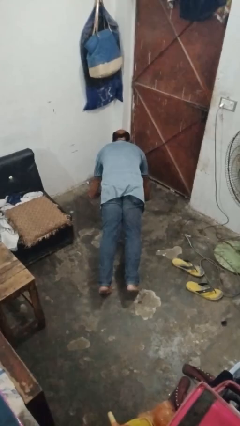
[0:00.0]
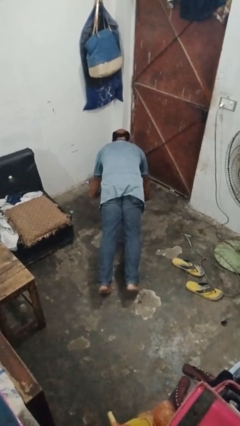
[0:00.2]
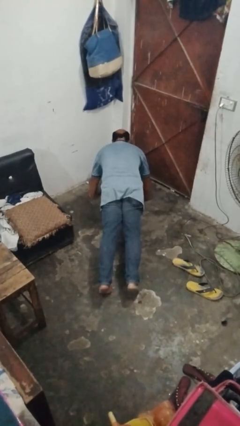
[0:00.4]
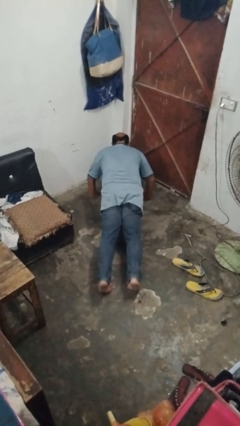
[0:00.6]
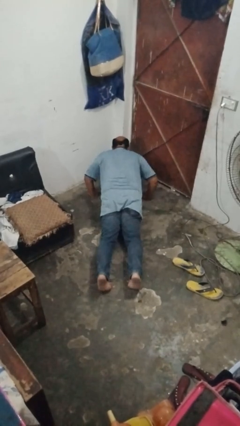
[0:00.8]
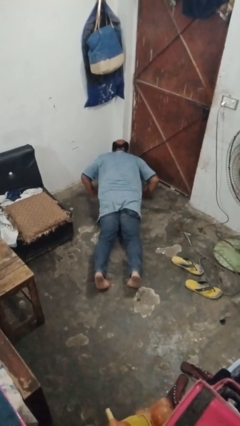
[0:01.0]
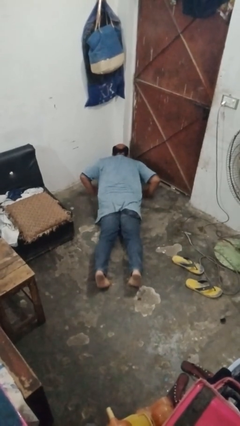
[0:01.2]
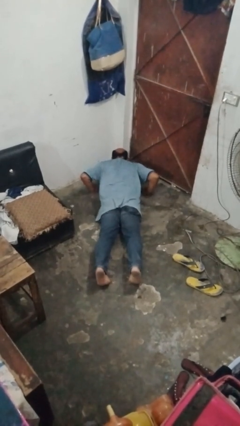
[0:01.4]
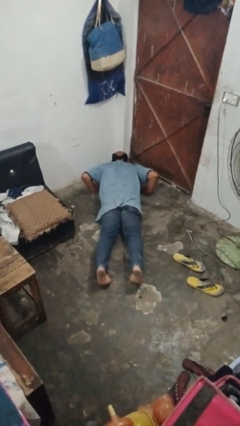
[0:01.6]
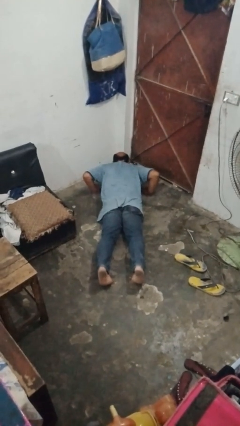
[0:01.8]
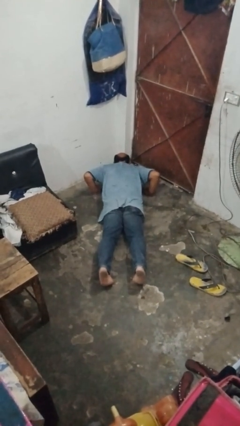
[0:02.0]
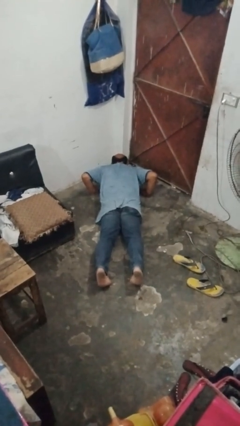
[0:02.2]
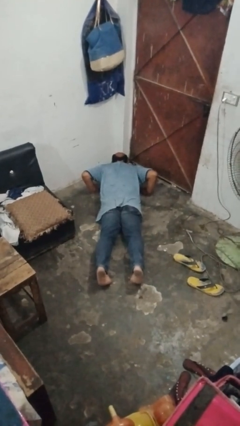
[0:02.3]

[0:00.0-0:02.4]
person exercises with pushup

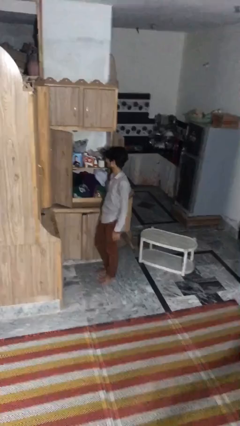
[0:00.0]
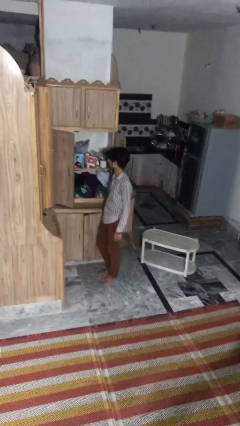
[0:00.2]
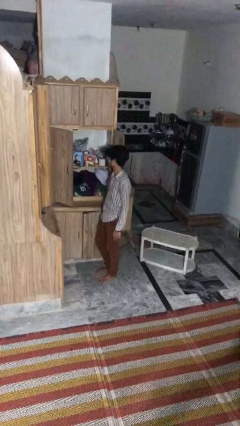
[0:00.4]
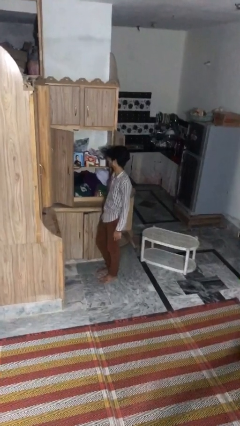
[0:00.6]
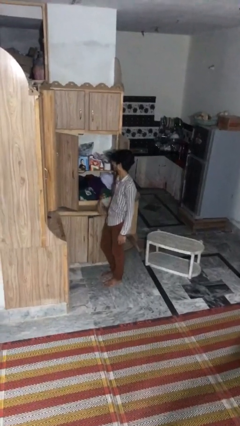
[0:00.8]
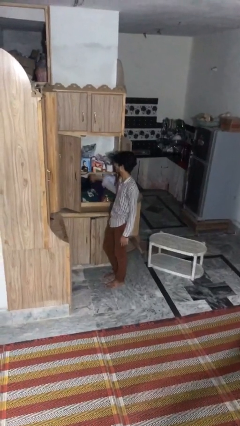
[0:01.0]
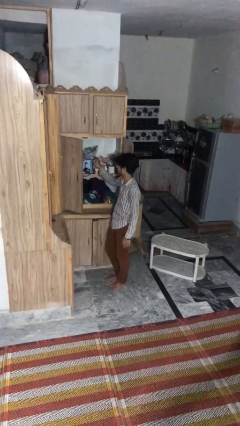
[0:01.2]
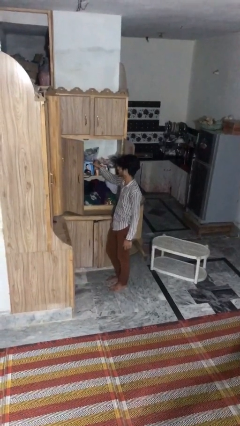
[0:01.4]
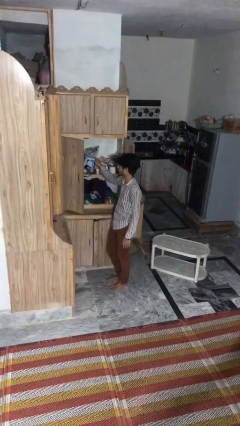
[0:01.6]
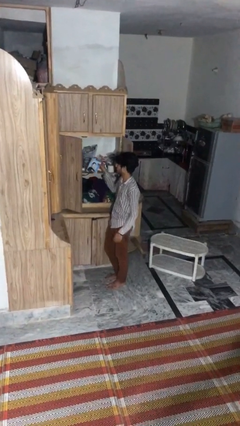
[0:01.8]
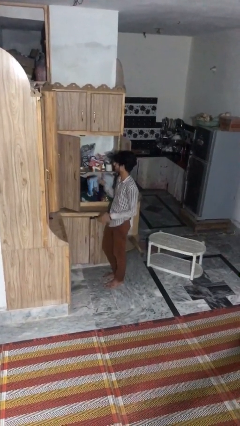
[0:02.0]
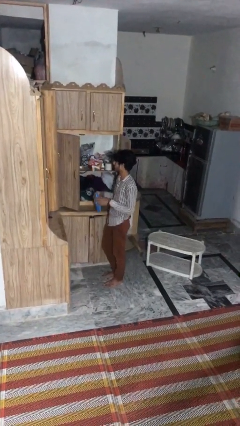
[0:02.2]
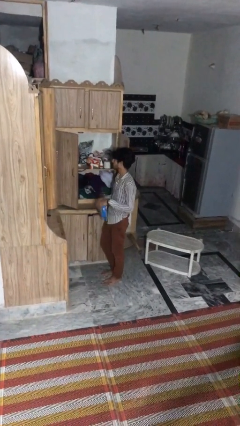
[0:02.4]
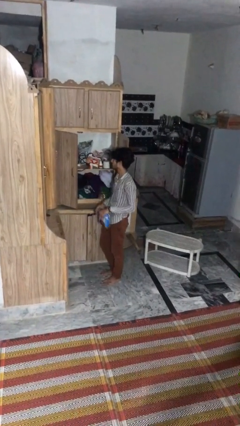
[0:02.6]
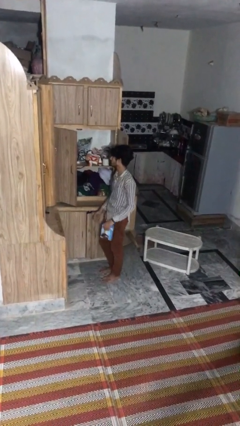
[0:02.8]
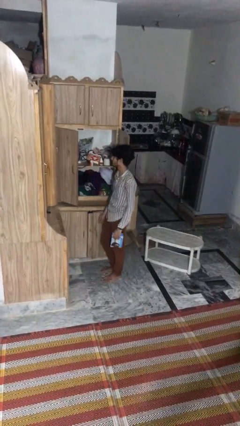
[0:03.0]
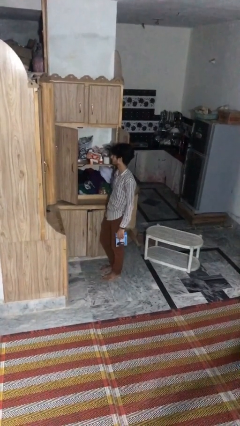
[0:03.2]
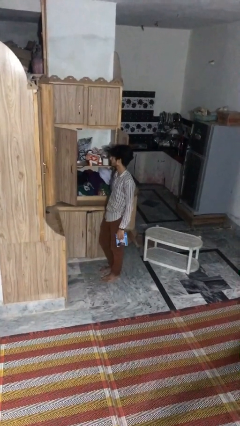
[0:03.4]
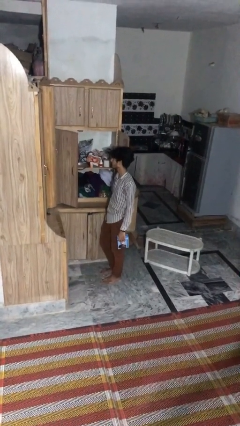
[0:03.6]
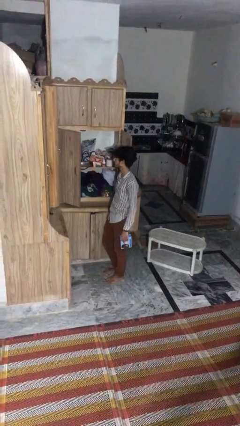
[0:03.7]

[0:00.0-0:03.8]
person picks up object from cabinet

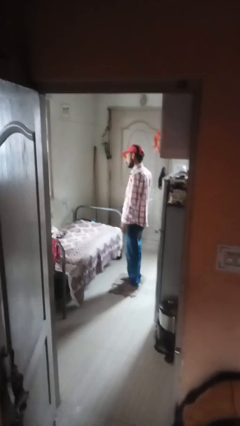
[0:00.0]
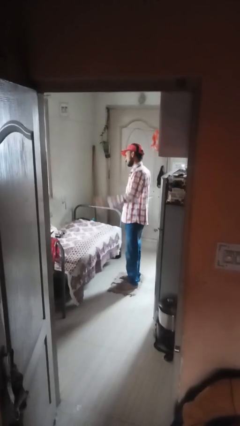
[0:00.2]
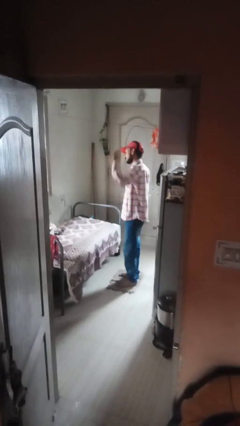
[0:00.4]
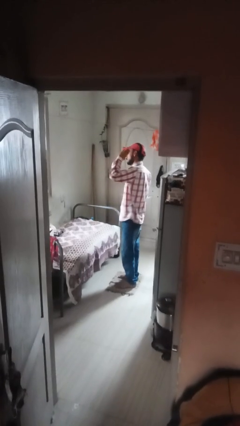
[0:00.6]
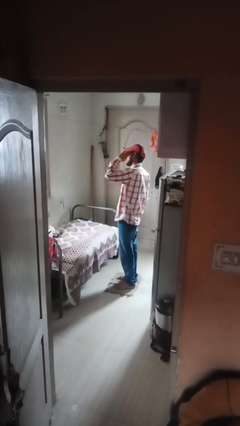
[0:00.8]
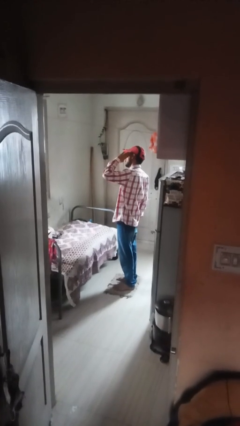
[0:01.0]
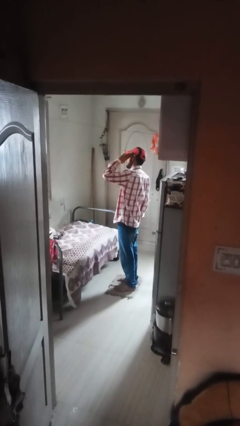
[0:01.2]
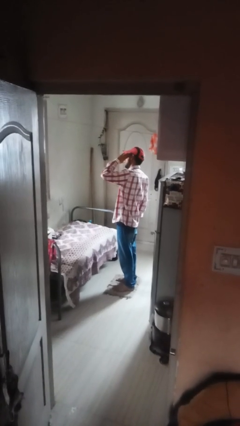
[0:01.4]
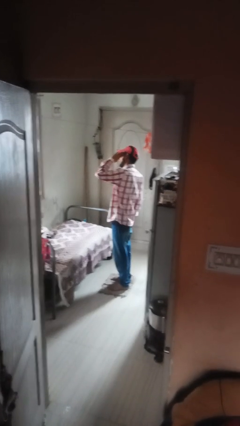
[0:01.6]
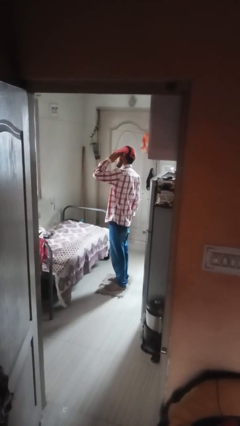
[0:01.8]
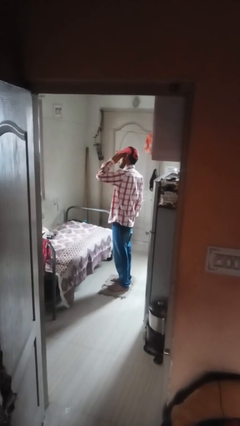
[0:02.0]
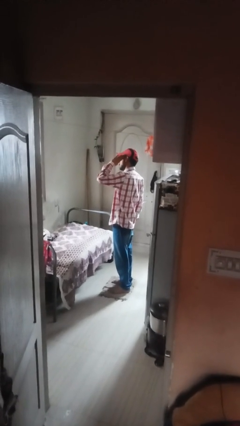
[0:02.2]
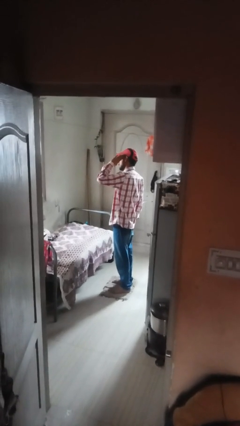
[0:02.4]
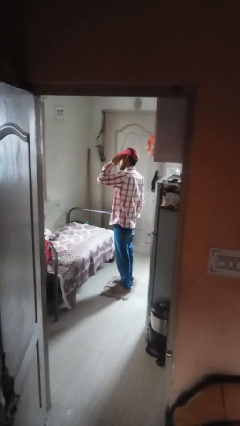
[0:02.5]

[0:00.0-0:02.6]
person salutes

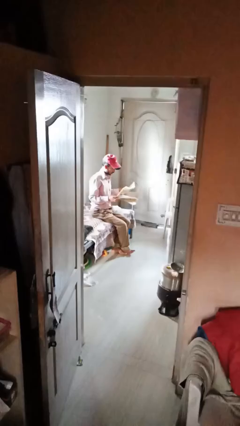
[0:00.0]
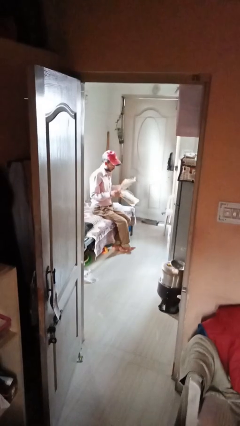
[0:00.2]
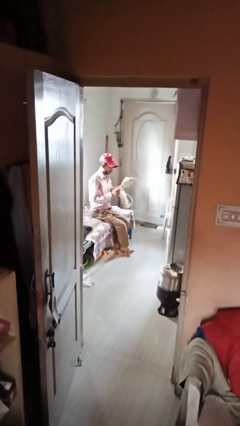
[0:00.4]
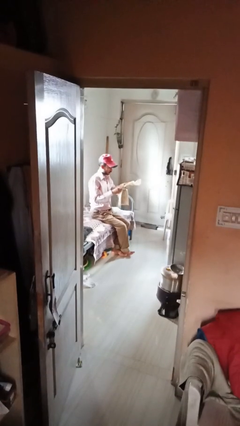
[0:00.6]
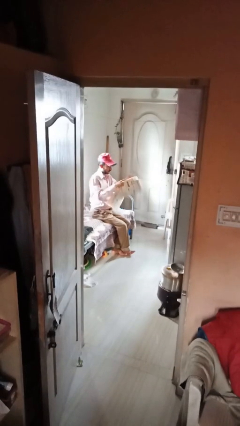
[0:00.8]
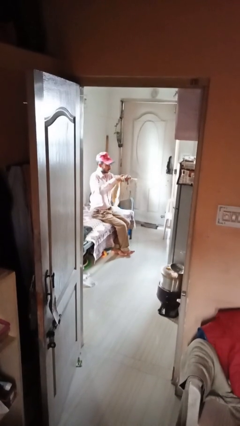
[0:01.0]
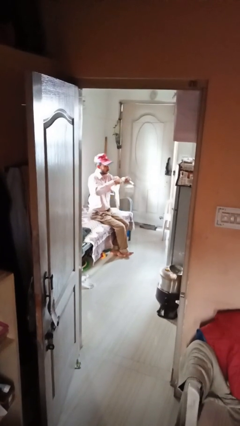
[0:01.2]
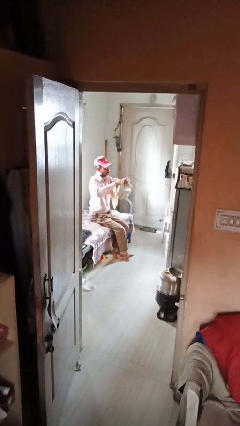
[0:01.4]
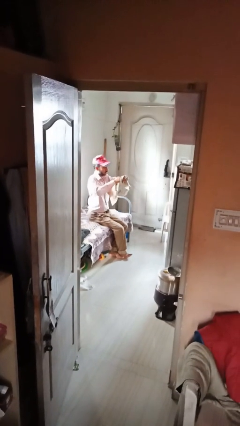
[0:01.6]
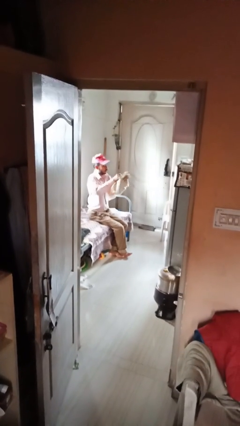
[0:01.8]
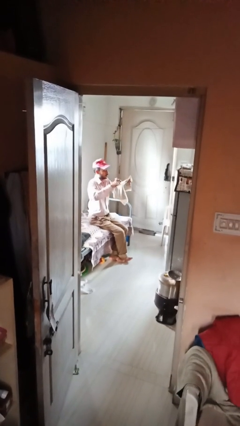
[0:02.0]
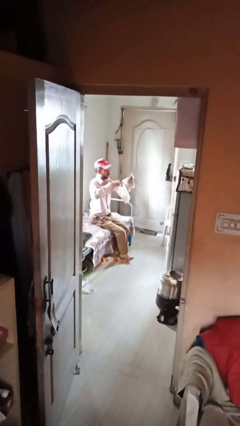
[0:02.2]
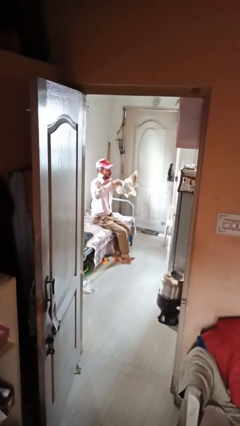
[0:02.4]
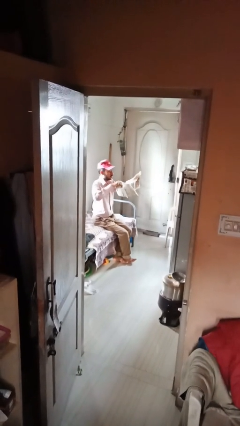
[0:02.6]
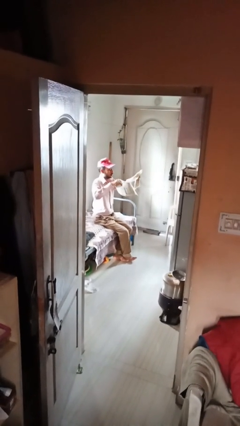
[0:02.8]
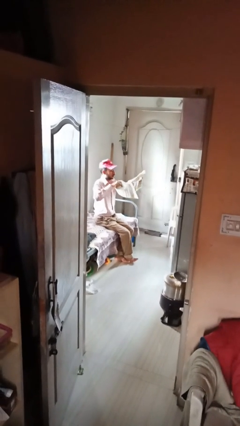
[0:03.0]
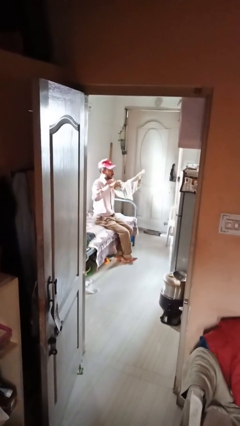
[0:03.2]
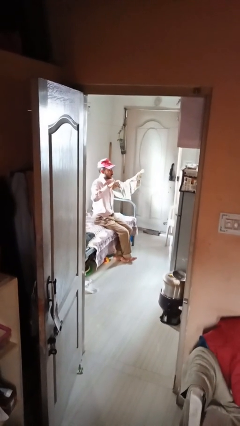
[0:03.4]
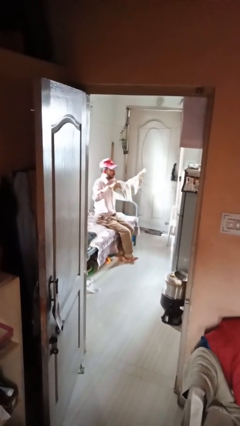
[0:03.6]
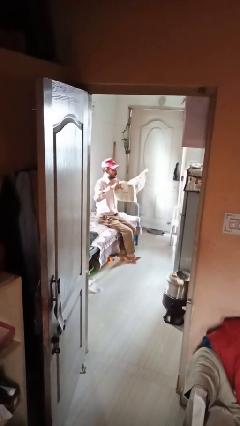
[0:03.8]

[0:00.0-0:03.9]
person tears paper

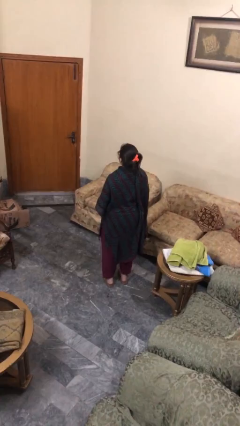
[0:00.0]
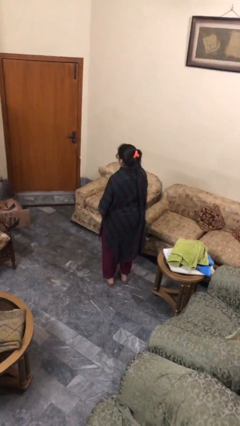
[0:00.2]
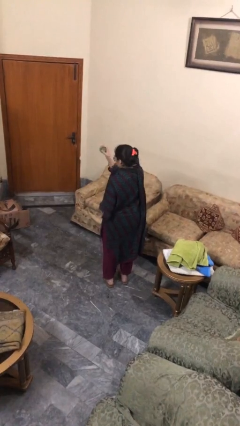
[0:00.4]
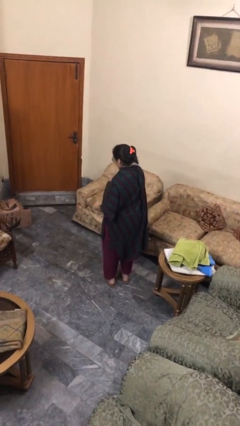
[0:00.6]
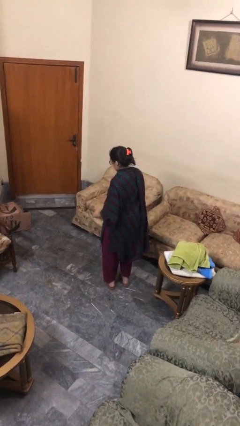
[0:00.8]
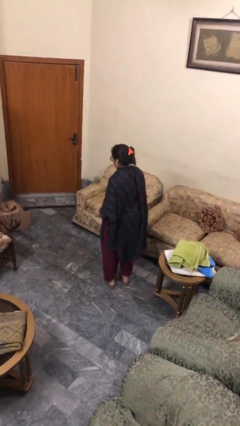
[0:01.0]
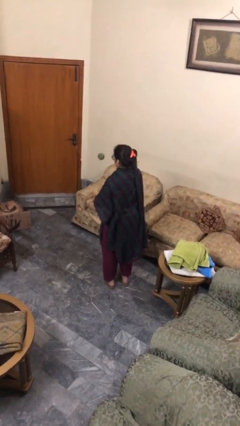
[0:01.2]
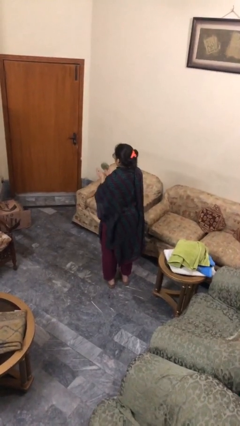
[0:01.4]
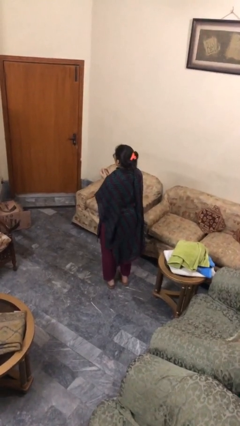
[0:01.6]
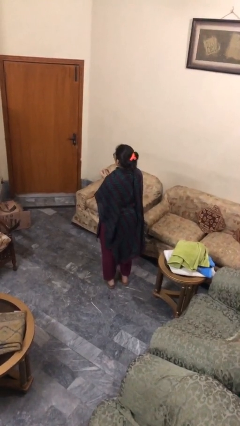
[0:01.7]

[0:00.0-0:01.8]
person bounces ball on floor

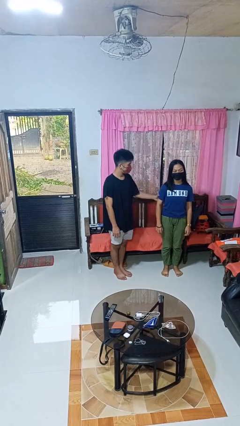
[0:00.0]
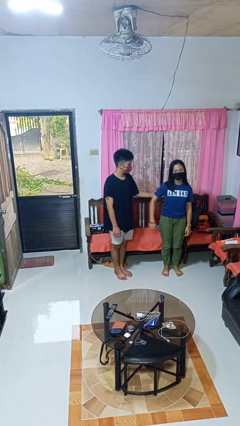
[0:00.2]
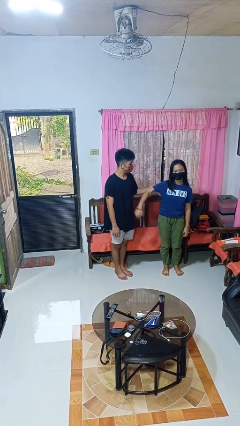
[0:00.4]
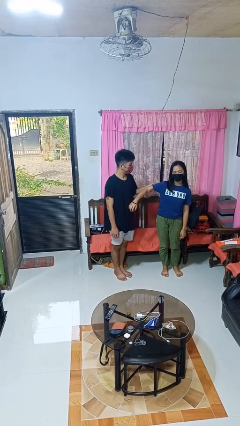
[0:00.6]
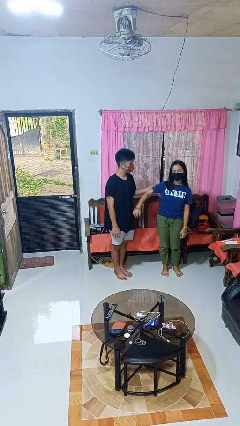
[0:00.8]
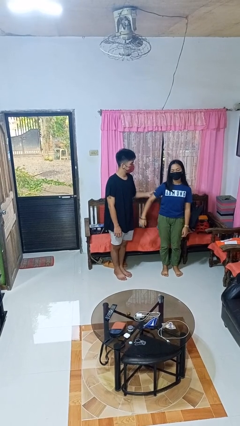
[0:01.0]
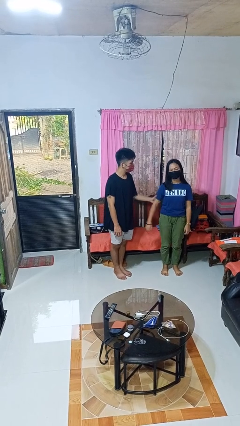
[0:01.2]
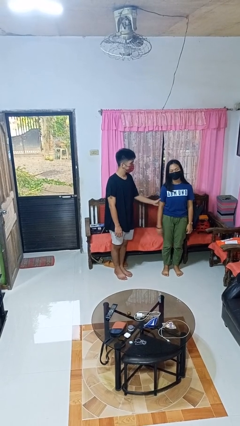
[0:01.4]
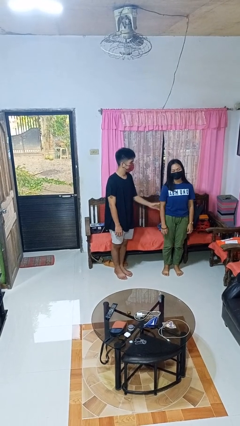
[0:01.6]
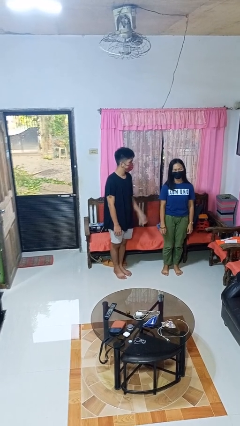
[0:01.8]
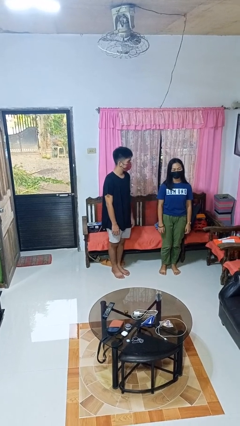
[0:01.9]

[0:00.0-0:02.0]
person grabs person by bicep

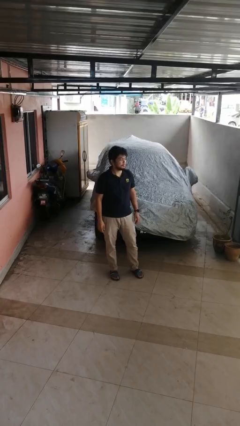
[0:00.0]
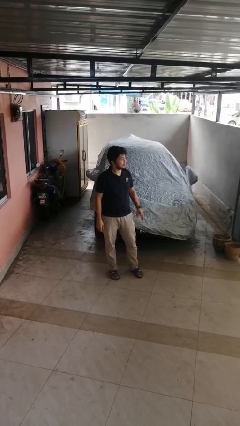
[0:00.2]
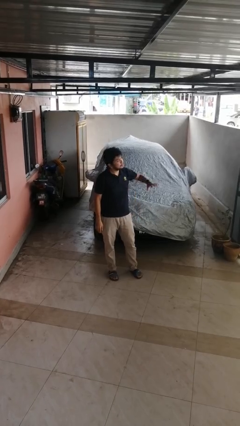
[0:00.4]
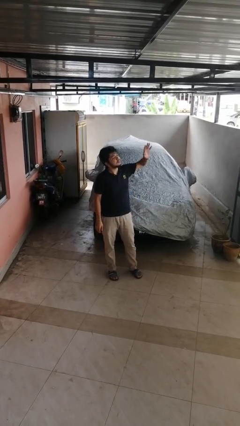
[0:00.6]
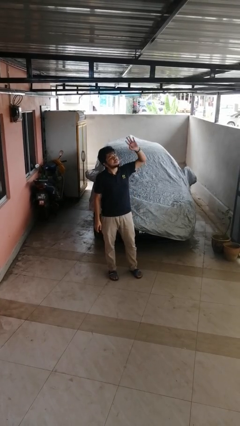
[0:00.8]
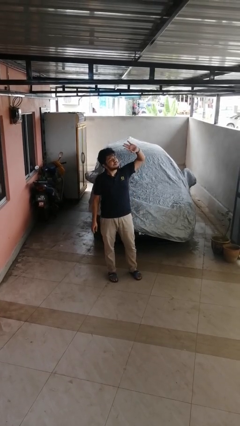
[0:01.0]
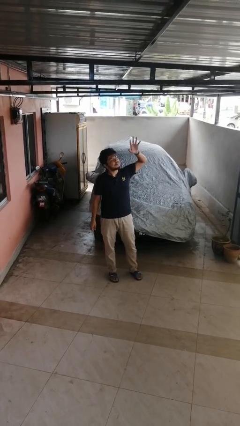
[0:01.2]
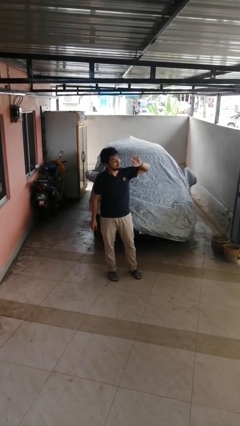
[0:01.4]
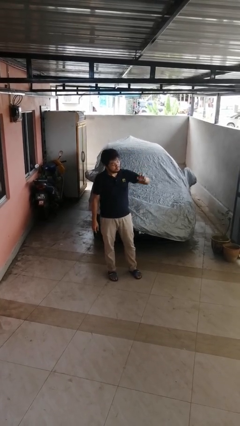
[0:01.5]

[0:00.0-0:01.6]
person waves at person
